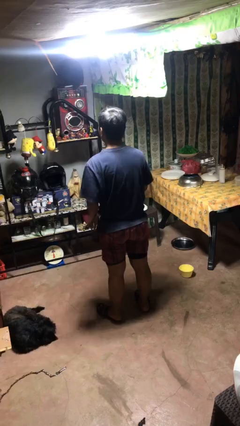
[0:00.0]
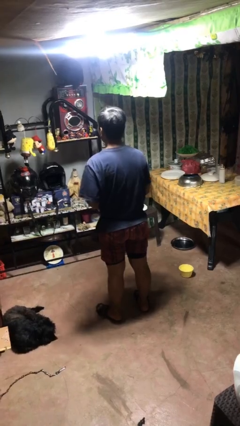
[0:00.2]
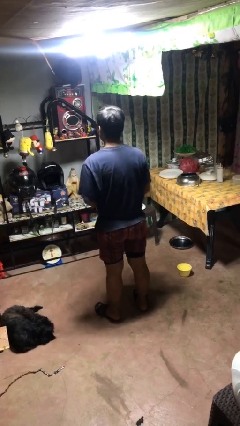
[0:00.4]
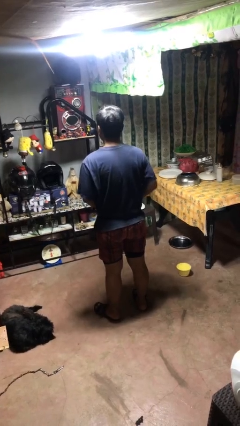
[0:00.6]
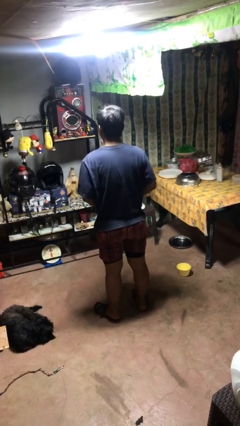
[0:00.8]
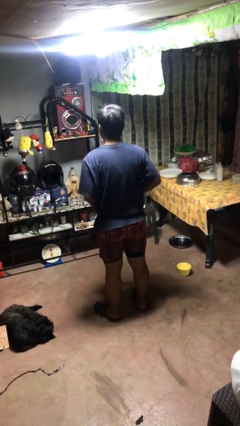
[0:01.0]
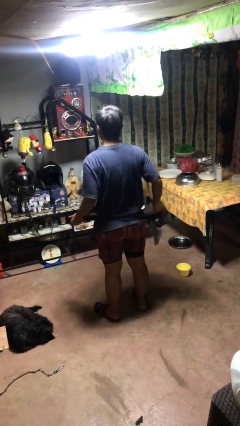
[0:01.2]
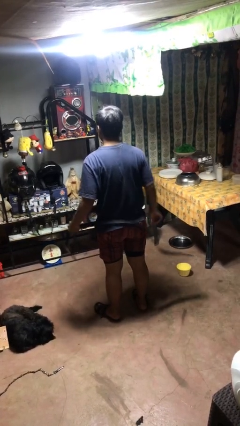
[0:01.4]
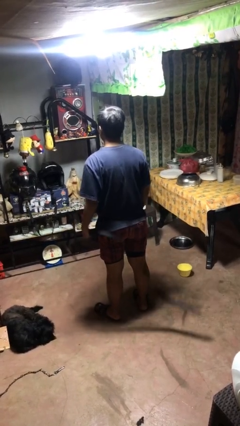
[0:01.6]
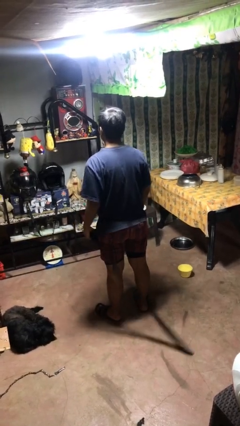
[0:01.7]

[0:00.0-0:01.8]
person takes off belt

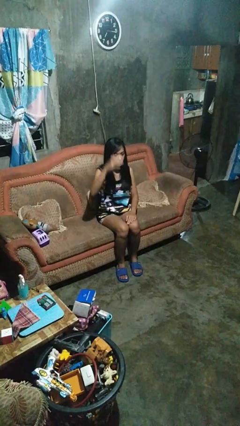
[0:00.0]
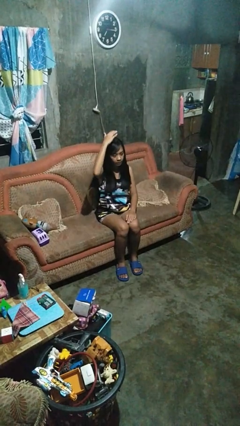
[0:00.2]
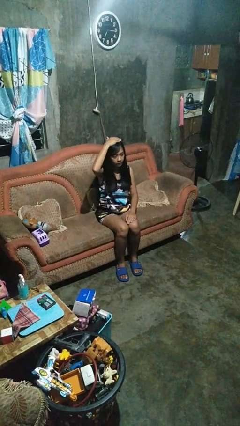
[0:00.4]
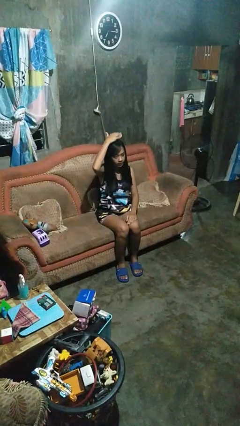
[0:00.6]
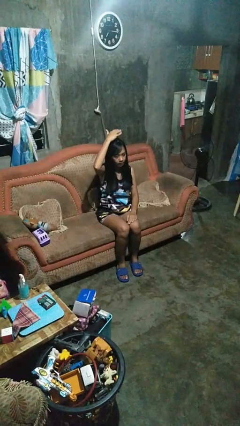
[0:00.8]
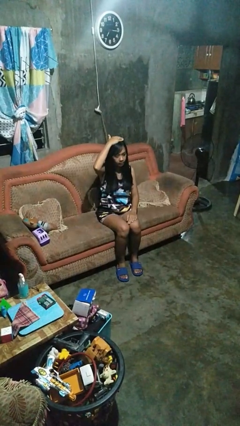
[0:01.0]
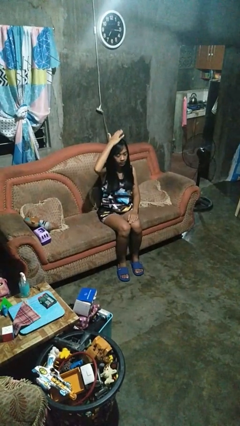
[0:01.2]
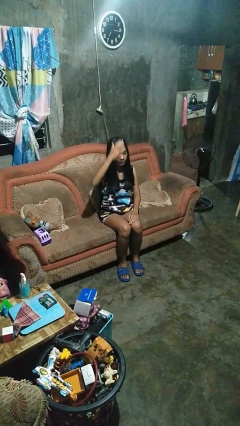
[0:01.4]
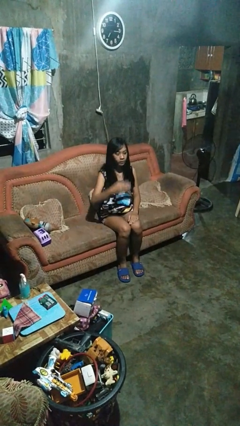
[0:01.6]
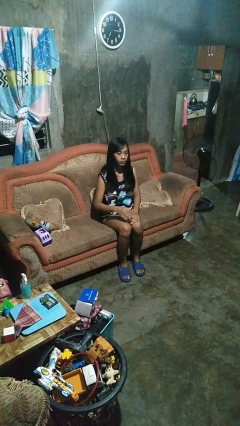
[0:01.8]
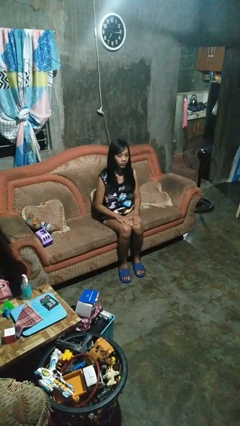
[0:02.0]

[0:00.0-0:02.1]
person pats head

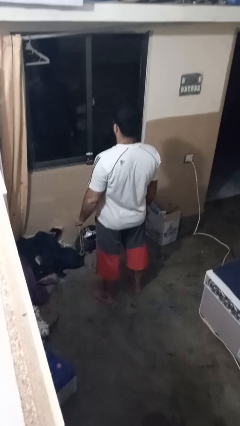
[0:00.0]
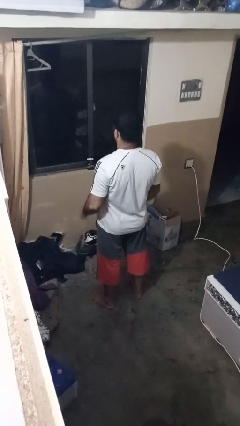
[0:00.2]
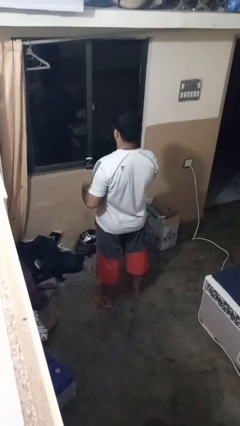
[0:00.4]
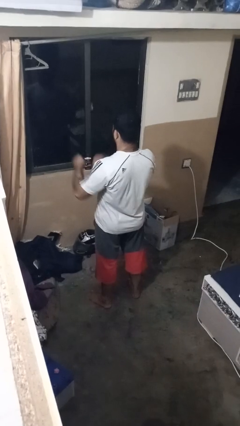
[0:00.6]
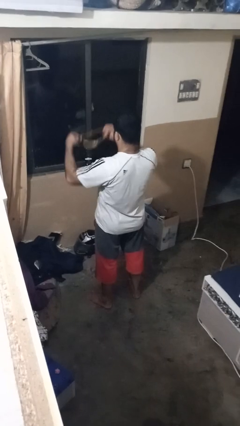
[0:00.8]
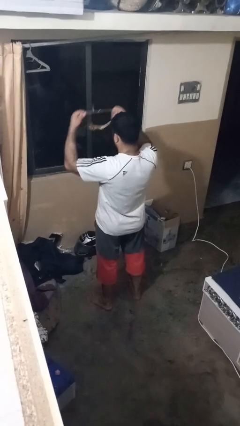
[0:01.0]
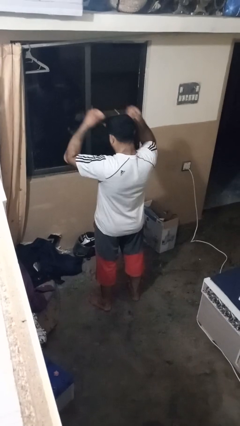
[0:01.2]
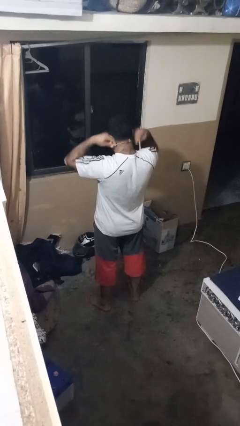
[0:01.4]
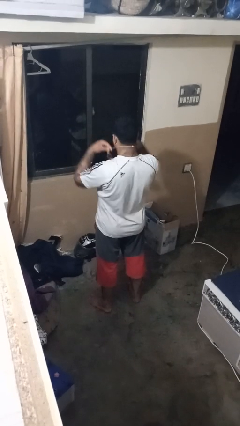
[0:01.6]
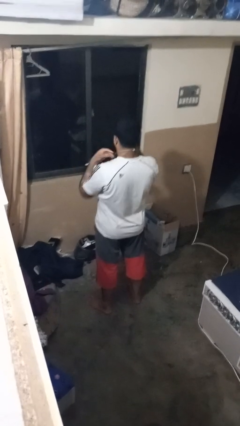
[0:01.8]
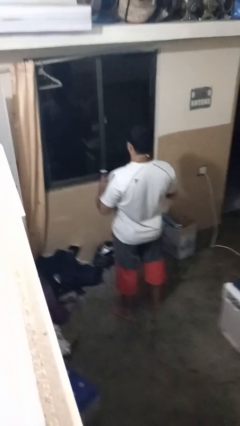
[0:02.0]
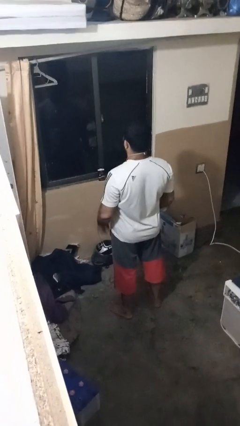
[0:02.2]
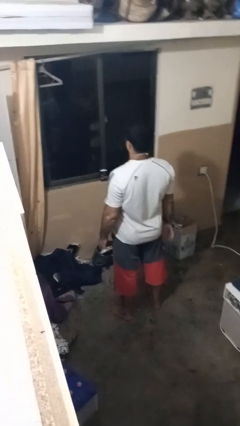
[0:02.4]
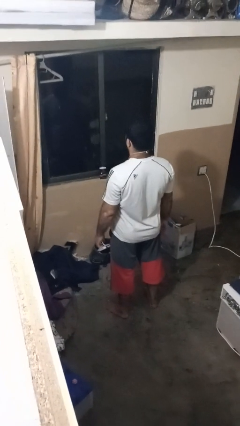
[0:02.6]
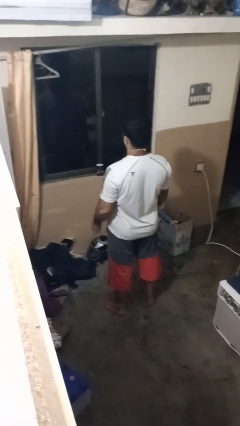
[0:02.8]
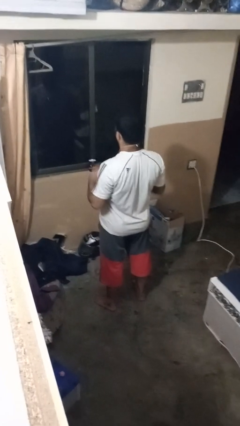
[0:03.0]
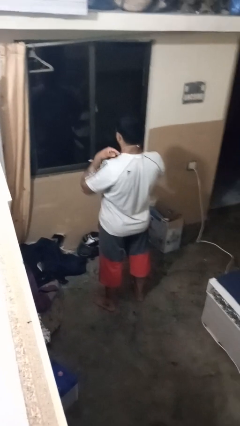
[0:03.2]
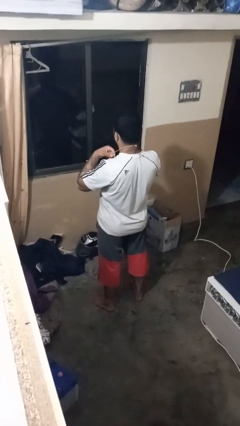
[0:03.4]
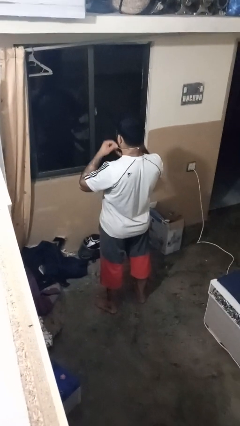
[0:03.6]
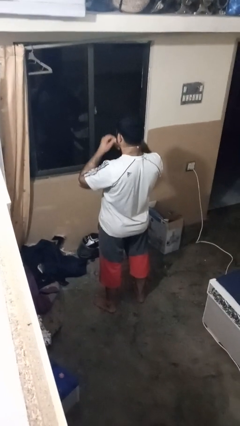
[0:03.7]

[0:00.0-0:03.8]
person puts on necklace

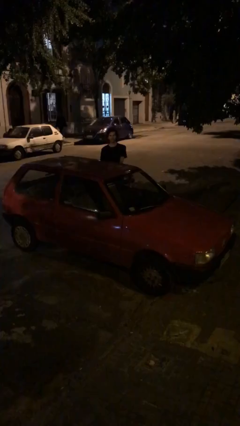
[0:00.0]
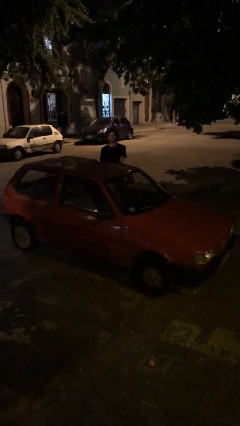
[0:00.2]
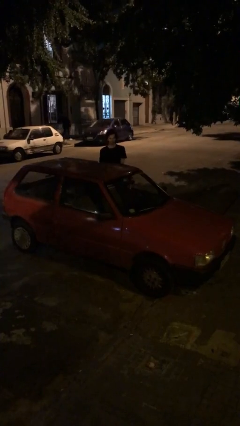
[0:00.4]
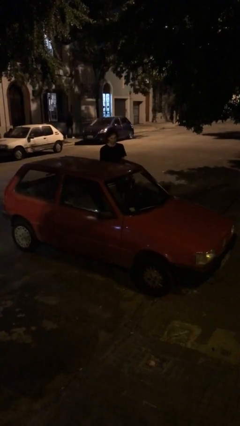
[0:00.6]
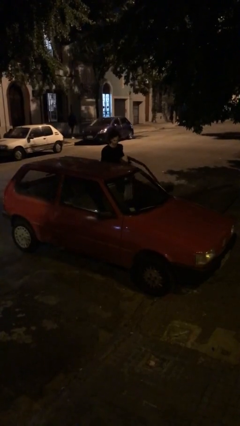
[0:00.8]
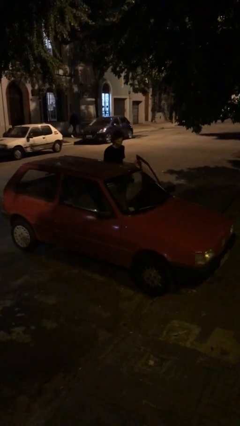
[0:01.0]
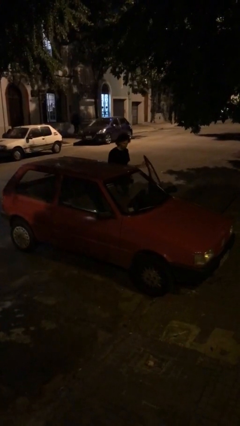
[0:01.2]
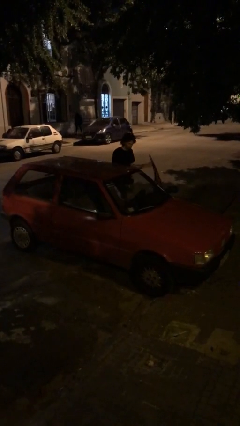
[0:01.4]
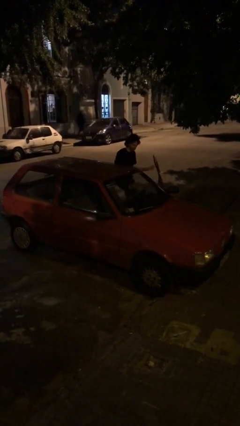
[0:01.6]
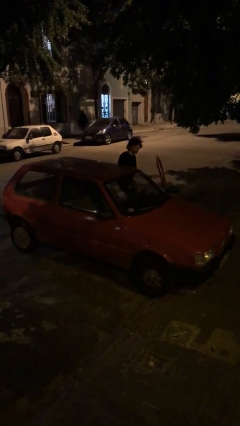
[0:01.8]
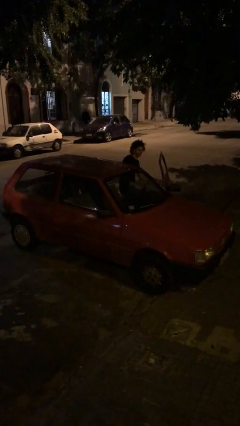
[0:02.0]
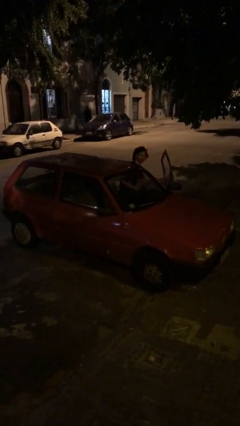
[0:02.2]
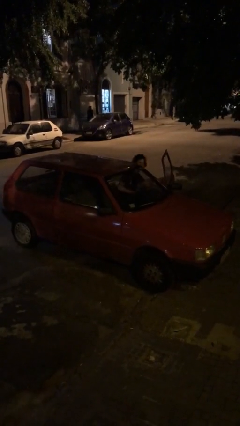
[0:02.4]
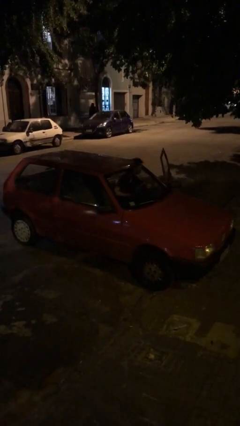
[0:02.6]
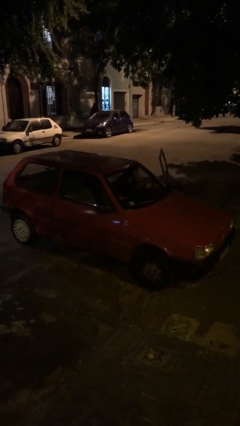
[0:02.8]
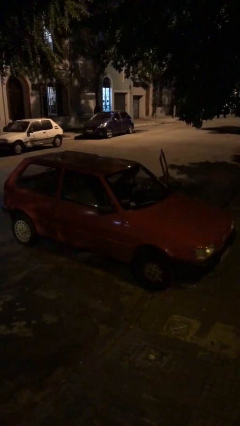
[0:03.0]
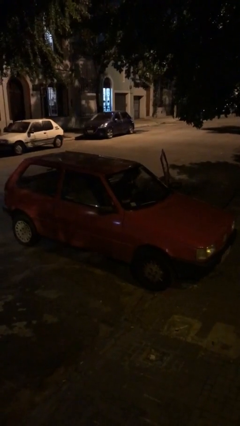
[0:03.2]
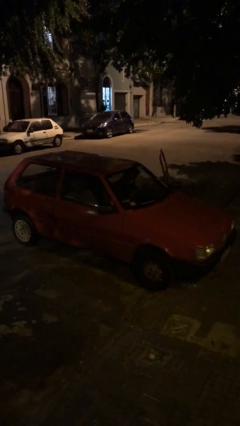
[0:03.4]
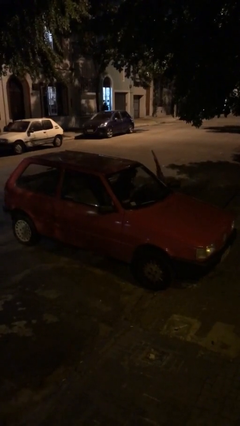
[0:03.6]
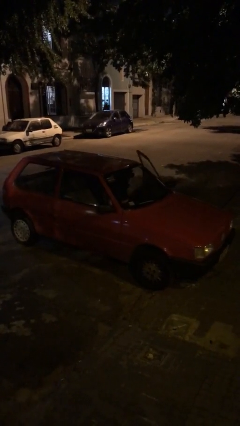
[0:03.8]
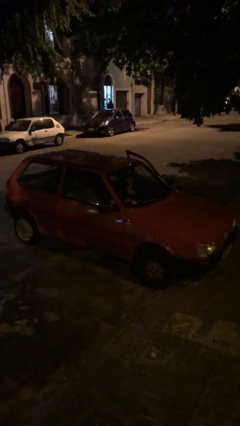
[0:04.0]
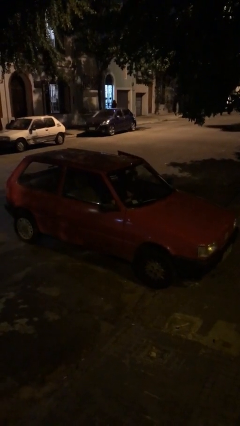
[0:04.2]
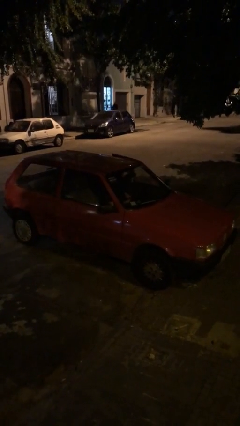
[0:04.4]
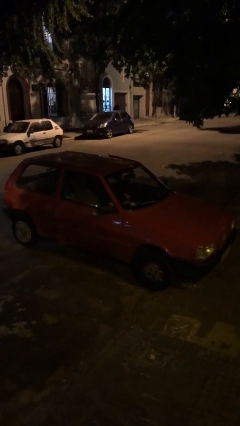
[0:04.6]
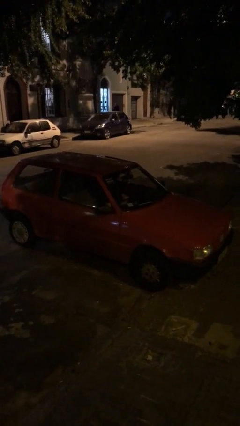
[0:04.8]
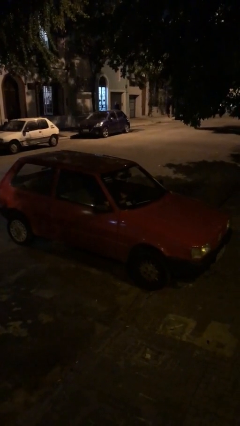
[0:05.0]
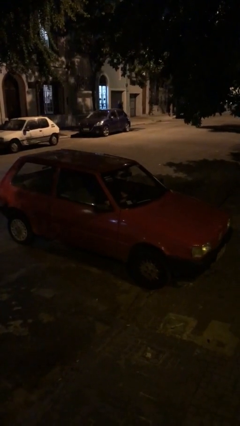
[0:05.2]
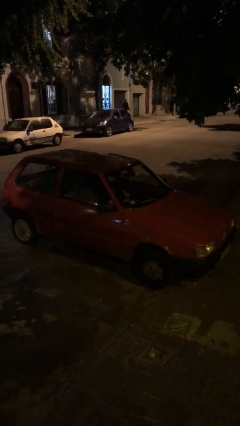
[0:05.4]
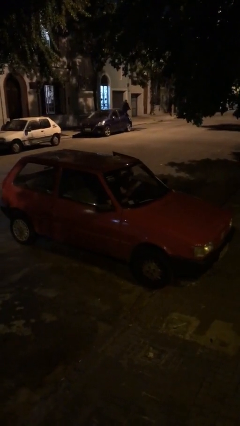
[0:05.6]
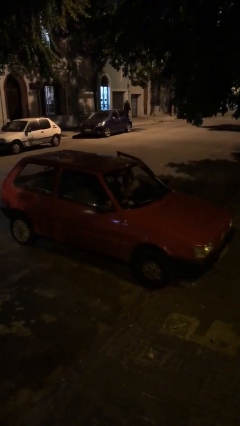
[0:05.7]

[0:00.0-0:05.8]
car picks up person

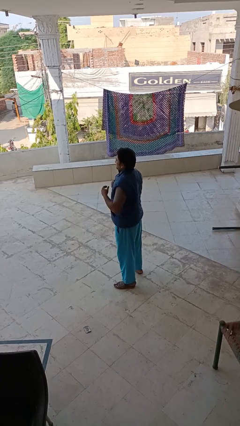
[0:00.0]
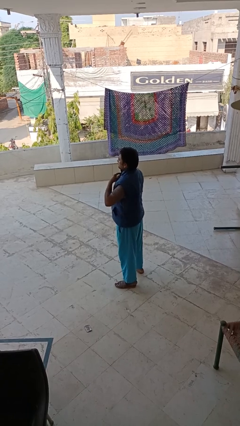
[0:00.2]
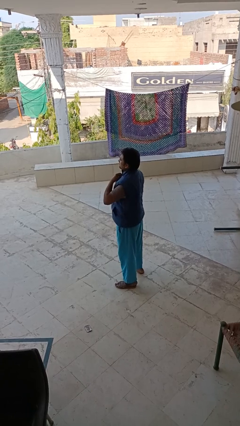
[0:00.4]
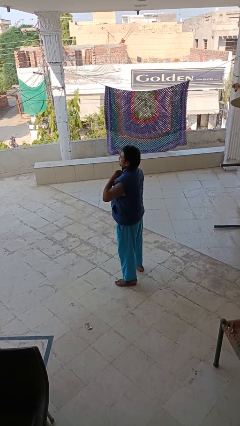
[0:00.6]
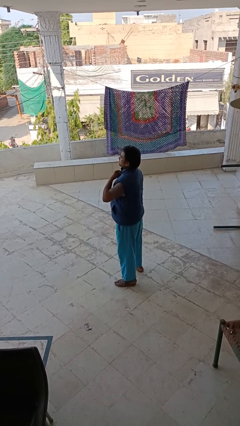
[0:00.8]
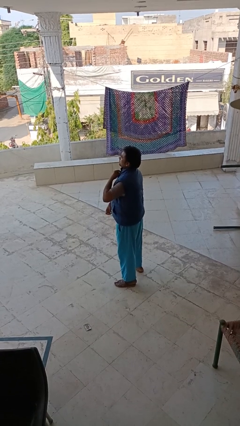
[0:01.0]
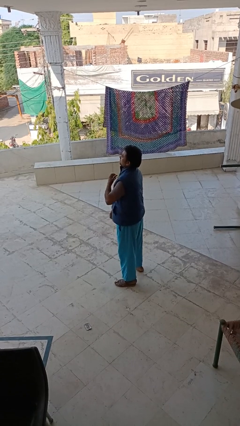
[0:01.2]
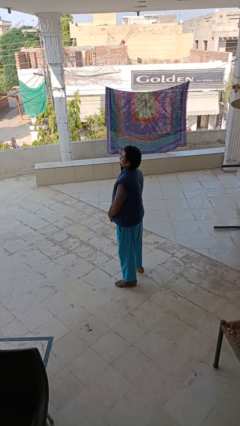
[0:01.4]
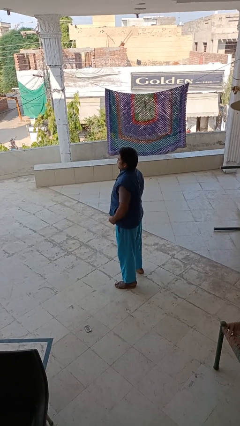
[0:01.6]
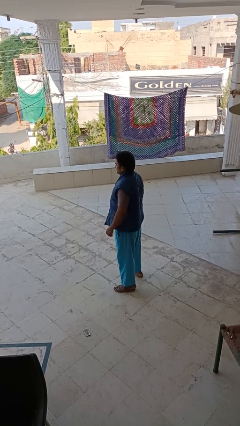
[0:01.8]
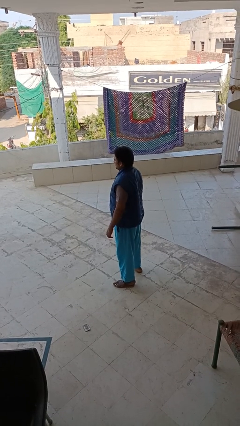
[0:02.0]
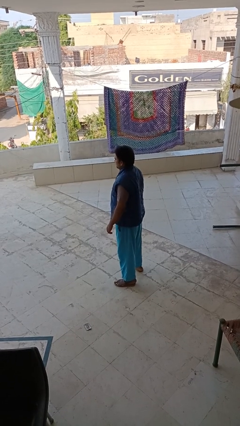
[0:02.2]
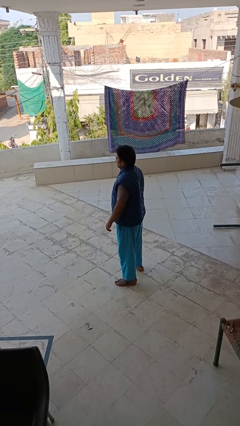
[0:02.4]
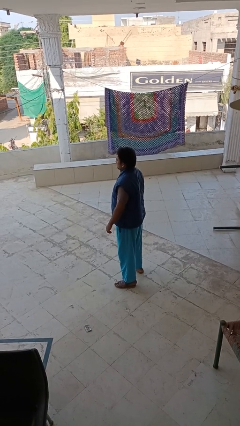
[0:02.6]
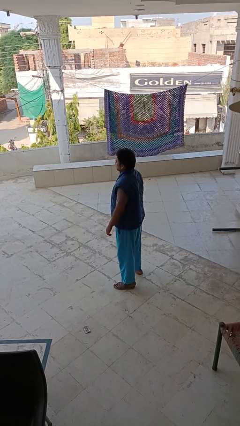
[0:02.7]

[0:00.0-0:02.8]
person unzips jacket

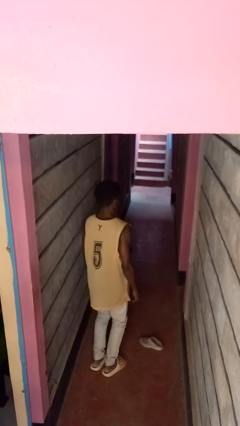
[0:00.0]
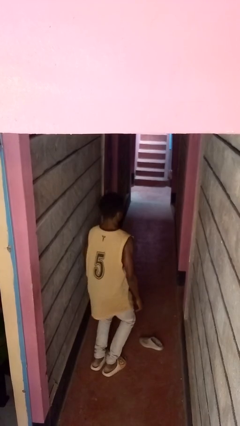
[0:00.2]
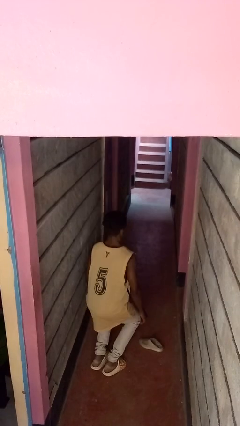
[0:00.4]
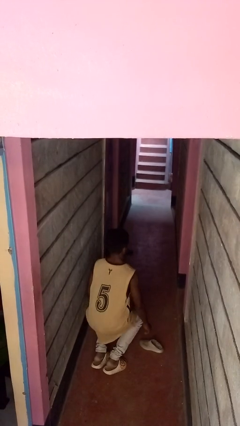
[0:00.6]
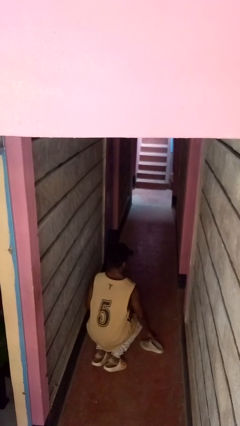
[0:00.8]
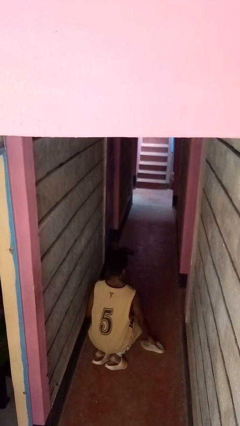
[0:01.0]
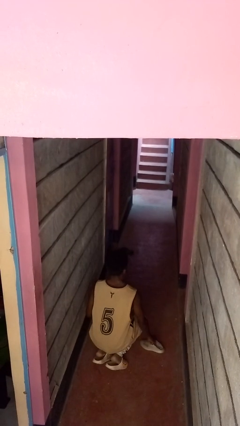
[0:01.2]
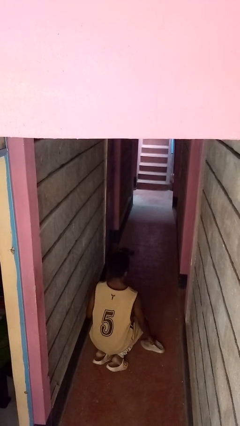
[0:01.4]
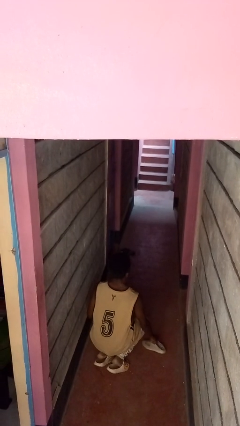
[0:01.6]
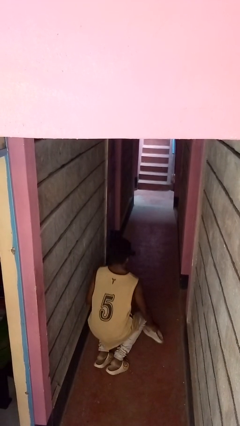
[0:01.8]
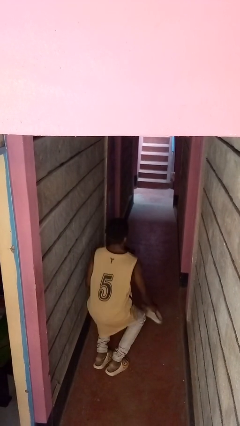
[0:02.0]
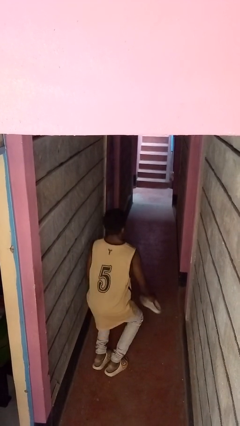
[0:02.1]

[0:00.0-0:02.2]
person picks up object from floor
